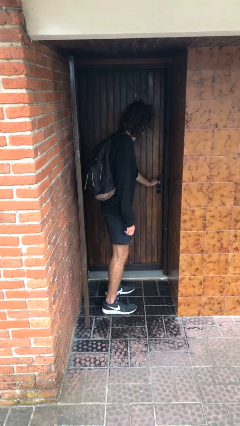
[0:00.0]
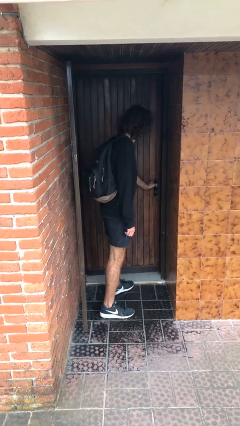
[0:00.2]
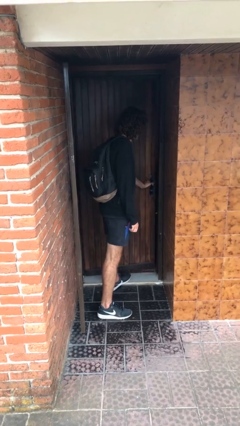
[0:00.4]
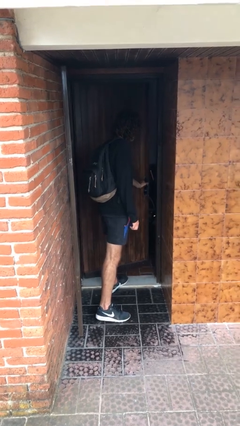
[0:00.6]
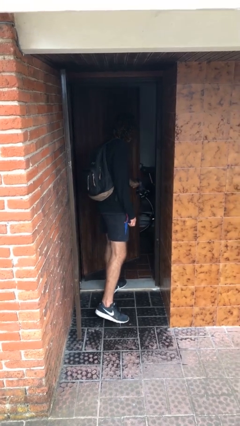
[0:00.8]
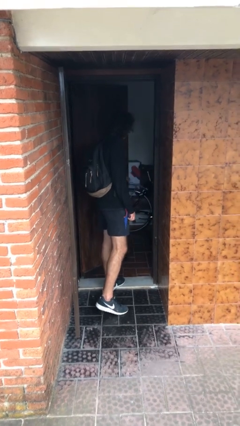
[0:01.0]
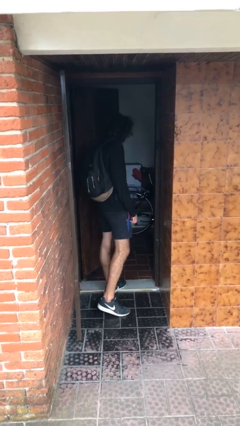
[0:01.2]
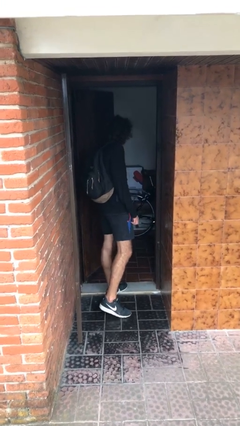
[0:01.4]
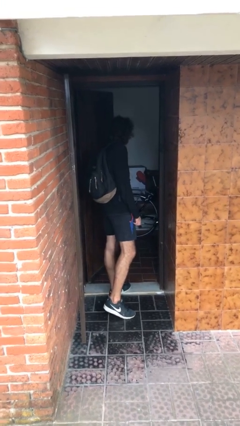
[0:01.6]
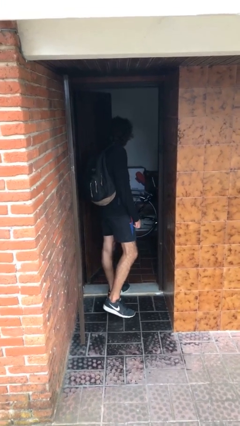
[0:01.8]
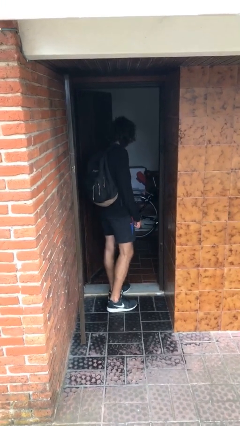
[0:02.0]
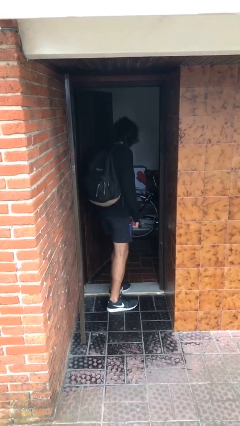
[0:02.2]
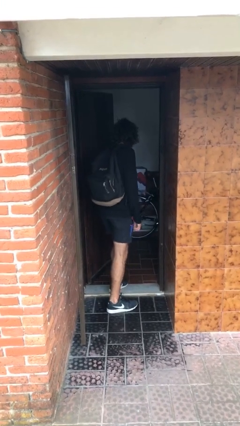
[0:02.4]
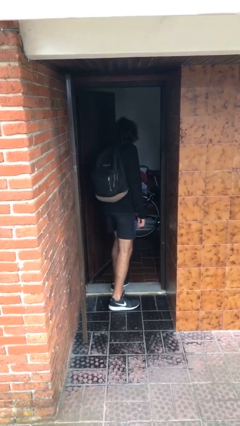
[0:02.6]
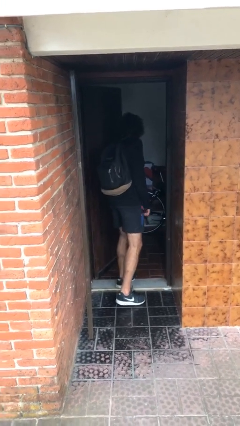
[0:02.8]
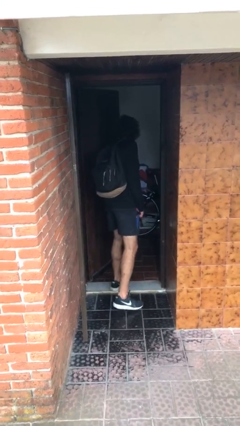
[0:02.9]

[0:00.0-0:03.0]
person opens facility door

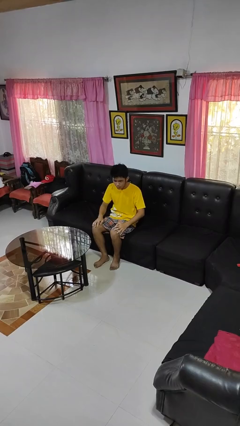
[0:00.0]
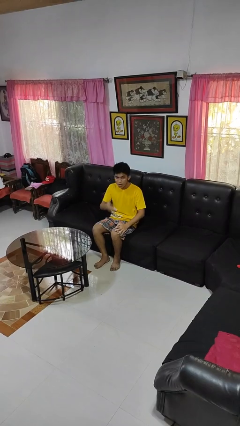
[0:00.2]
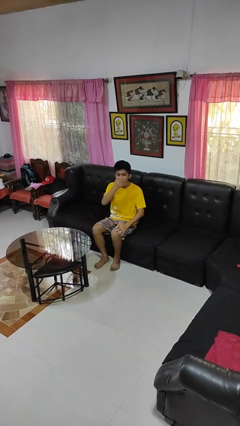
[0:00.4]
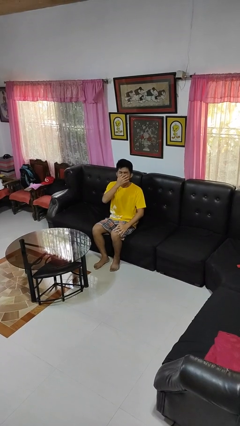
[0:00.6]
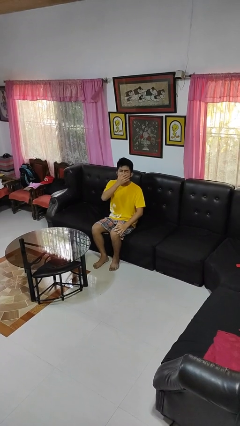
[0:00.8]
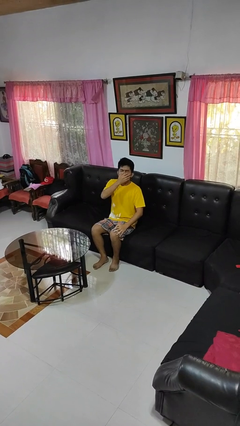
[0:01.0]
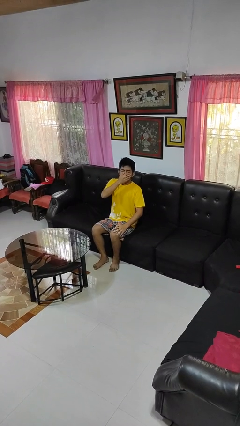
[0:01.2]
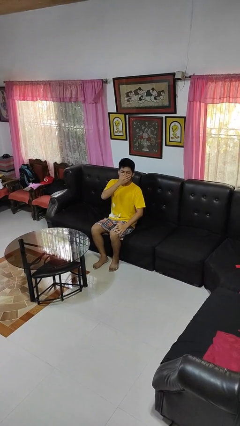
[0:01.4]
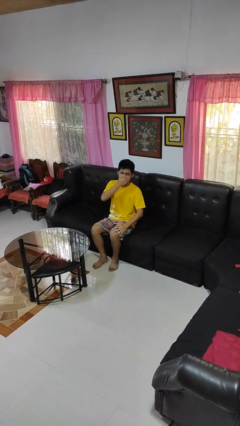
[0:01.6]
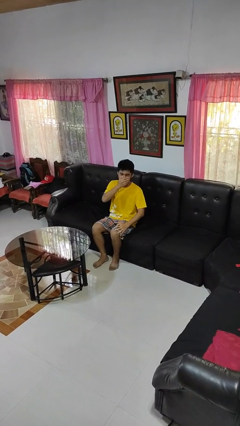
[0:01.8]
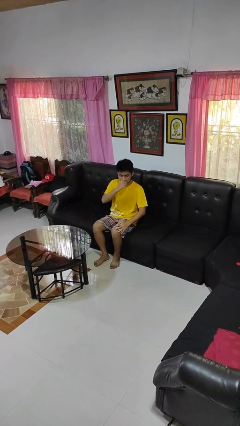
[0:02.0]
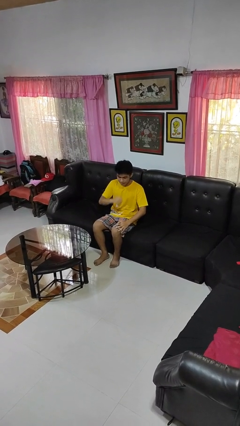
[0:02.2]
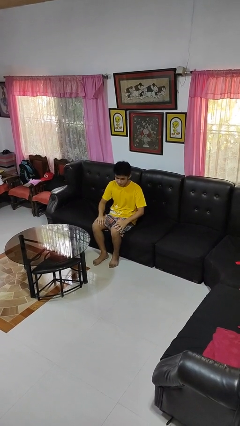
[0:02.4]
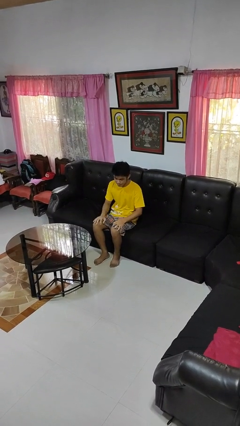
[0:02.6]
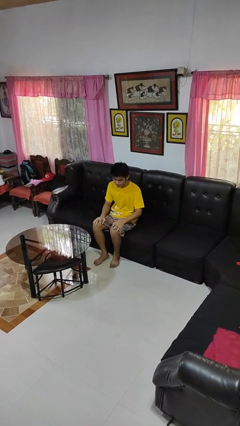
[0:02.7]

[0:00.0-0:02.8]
person yawns

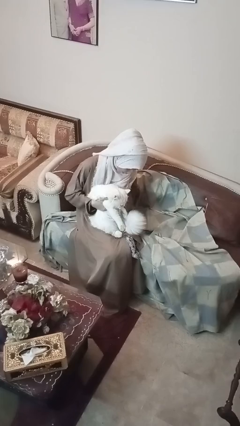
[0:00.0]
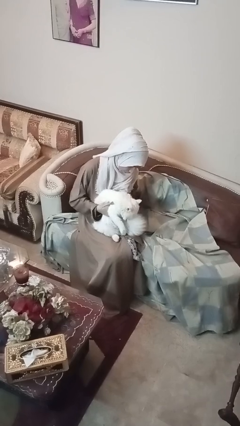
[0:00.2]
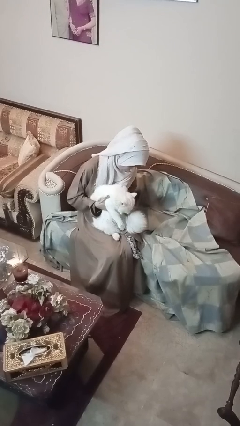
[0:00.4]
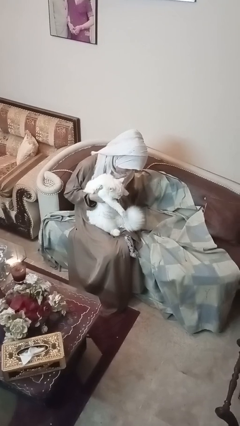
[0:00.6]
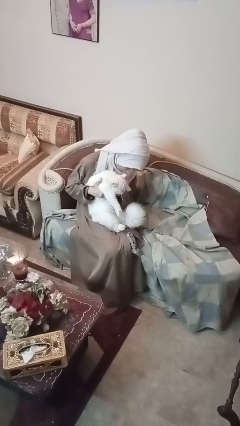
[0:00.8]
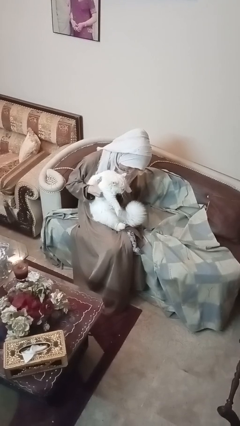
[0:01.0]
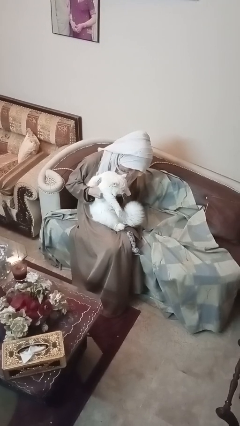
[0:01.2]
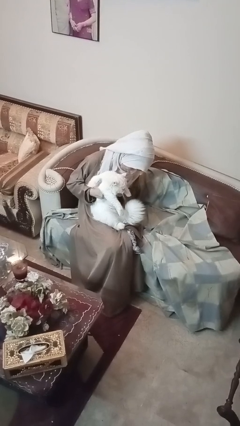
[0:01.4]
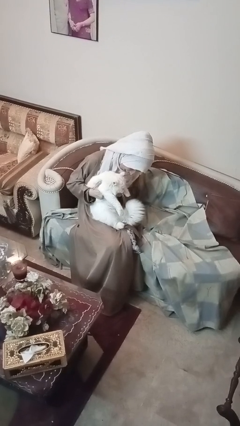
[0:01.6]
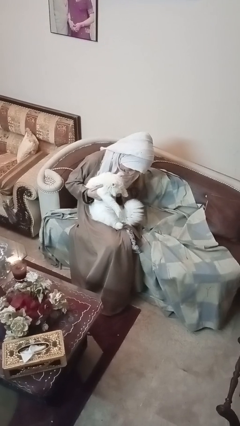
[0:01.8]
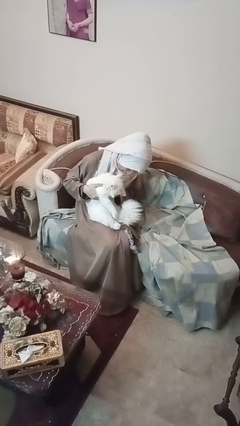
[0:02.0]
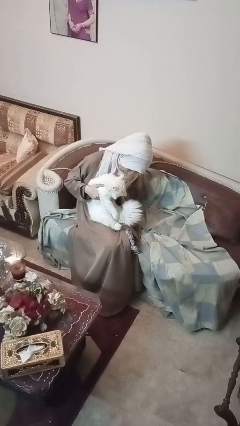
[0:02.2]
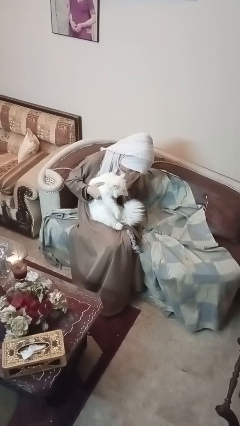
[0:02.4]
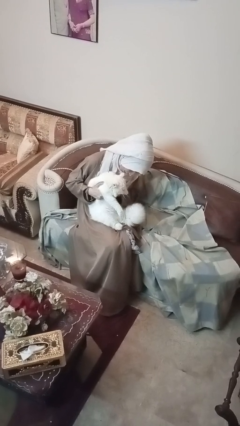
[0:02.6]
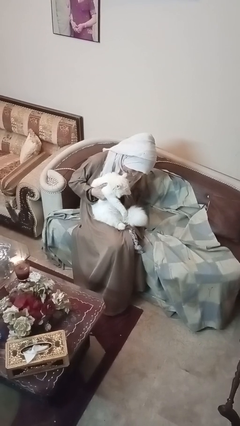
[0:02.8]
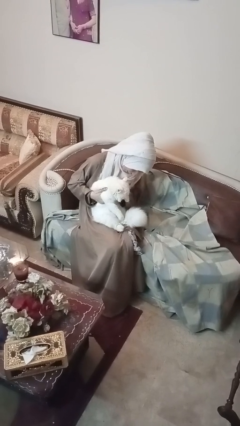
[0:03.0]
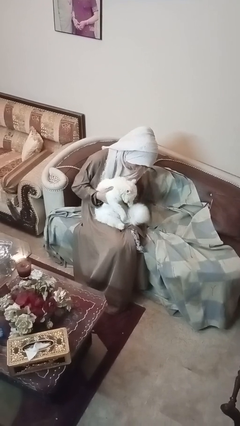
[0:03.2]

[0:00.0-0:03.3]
person hugs cat

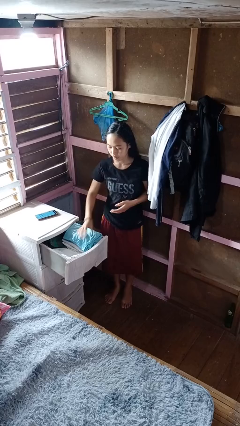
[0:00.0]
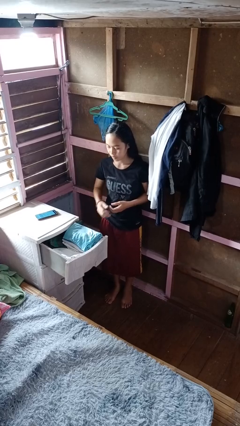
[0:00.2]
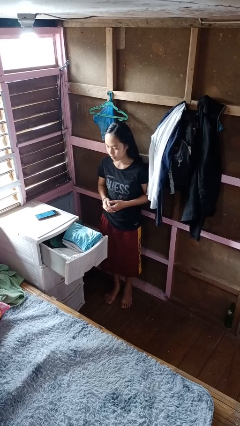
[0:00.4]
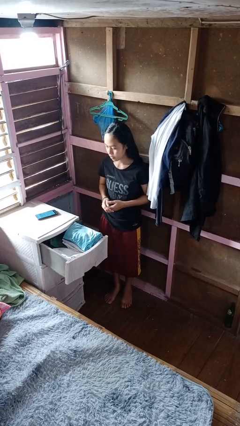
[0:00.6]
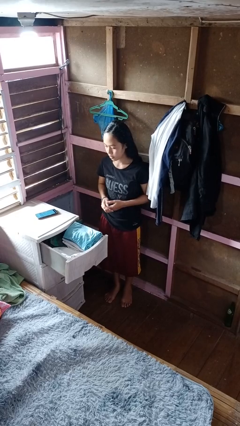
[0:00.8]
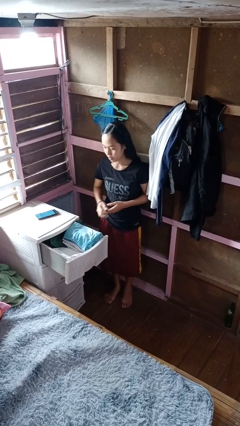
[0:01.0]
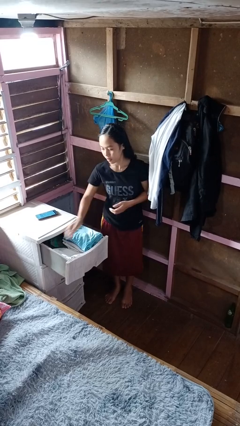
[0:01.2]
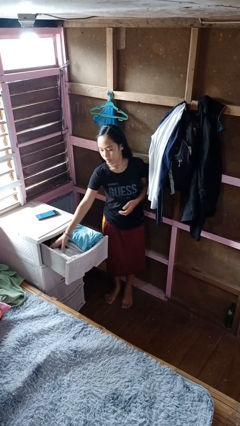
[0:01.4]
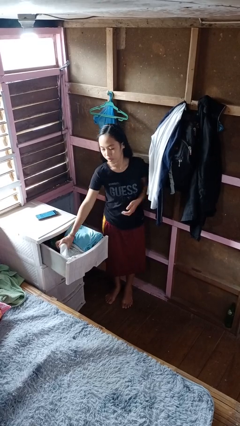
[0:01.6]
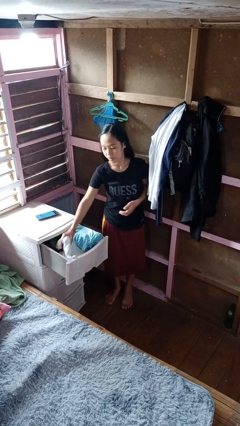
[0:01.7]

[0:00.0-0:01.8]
person puts clothes into dresser

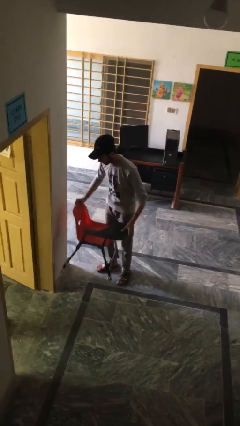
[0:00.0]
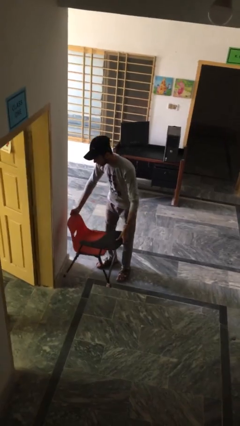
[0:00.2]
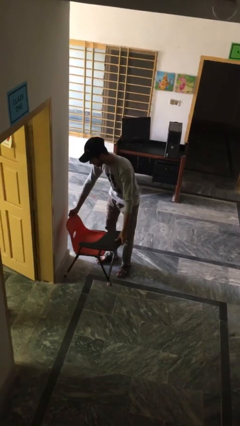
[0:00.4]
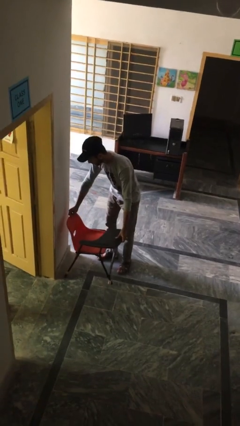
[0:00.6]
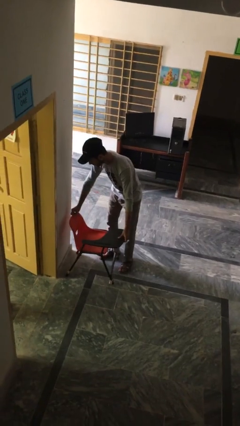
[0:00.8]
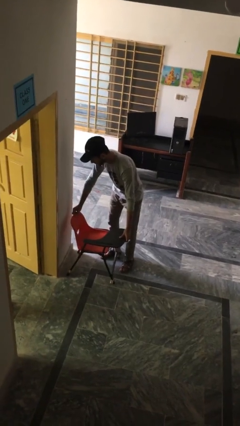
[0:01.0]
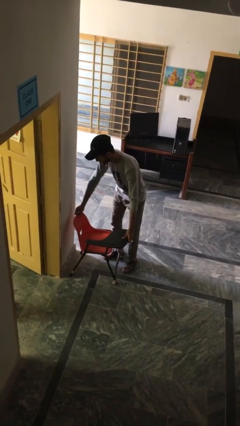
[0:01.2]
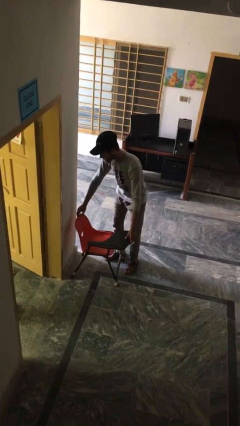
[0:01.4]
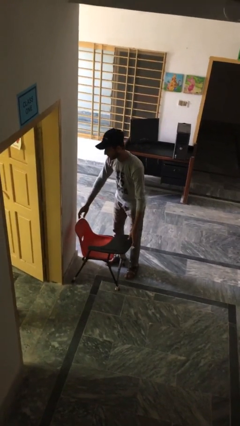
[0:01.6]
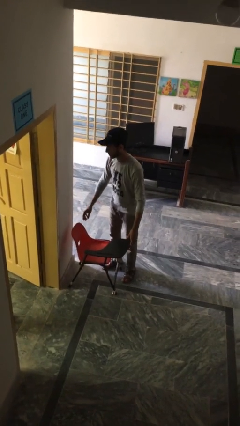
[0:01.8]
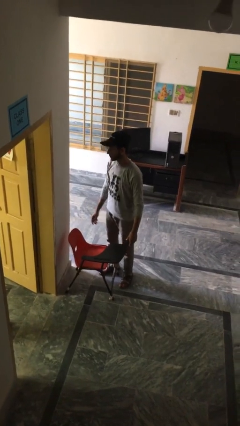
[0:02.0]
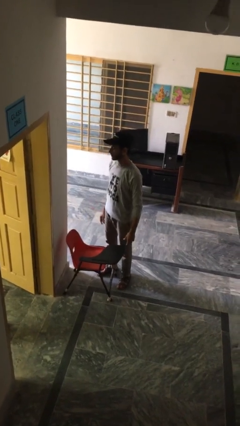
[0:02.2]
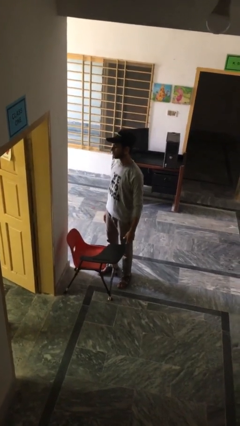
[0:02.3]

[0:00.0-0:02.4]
person puts down object on floor

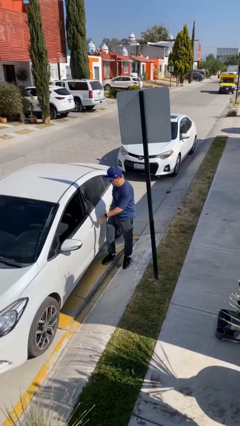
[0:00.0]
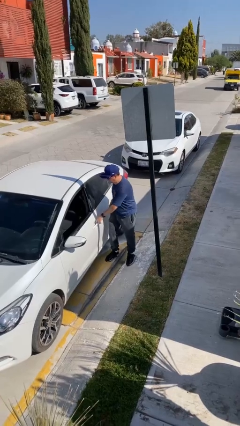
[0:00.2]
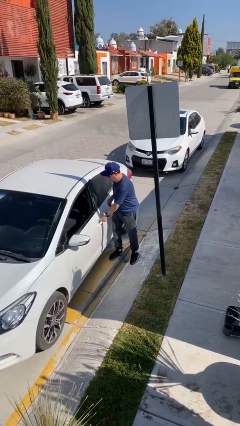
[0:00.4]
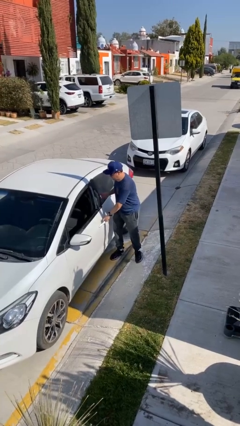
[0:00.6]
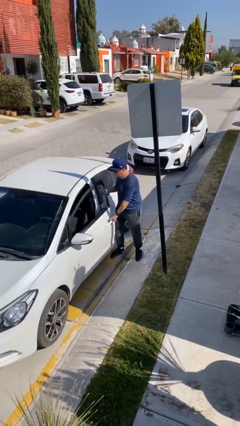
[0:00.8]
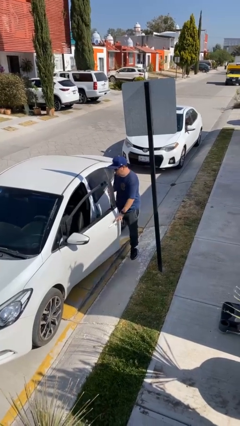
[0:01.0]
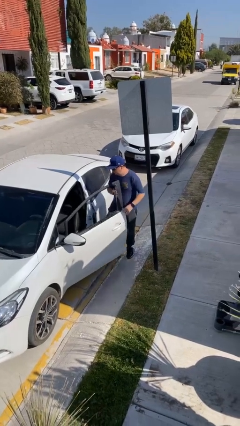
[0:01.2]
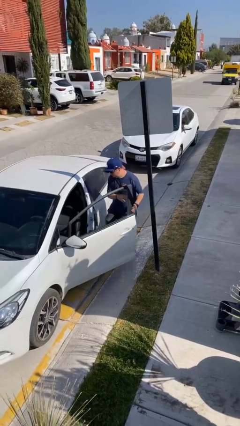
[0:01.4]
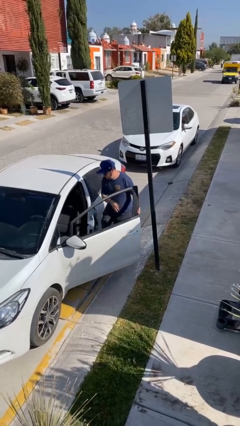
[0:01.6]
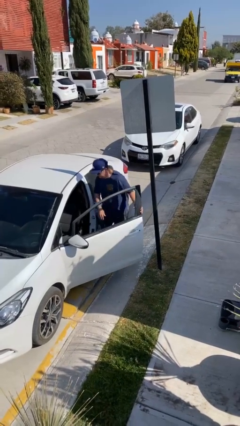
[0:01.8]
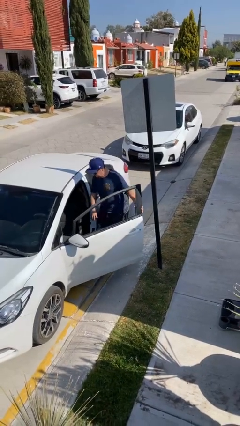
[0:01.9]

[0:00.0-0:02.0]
person opens car door

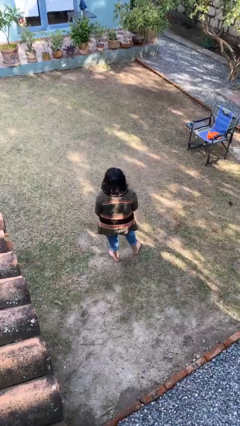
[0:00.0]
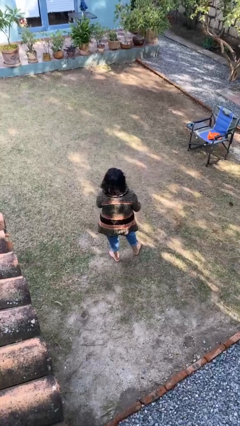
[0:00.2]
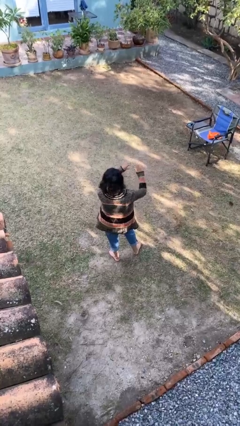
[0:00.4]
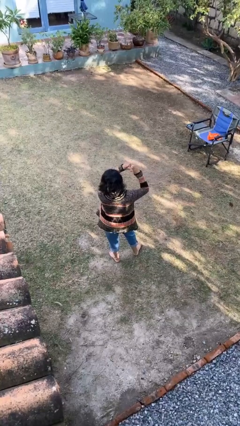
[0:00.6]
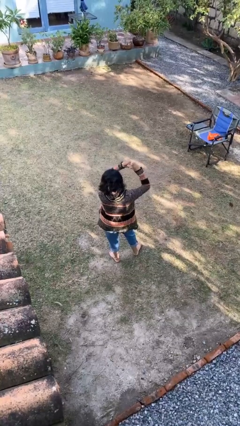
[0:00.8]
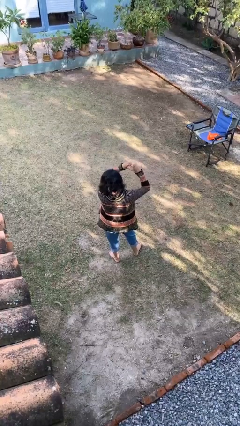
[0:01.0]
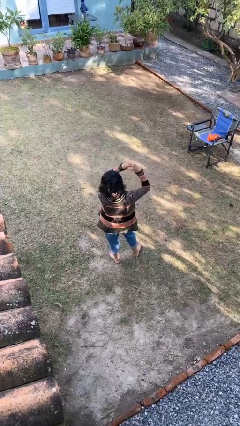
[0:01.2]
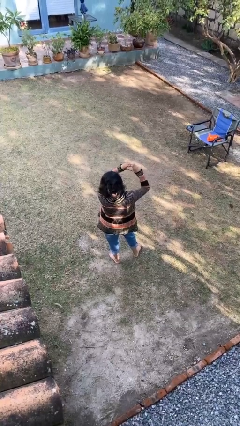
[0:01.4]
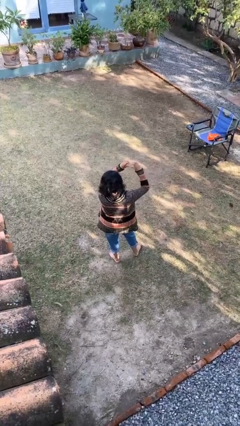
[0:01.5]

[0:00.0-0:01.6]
person gestures heart
